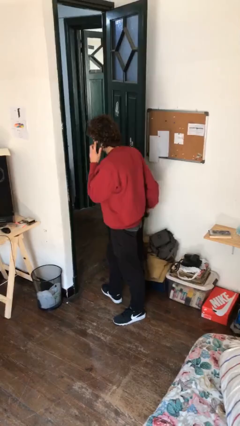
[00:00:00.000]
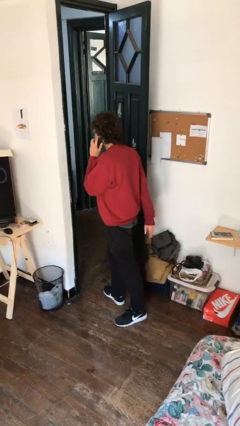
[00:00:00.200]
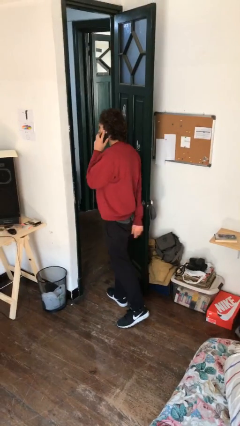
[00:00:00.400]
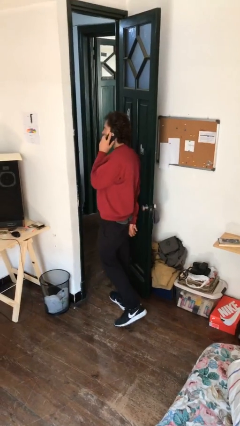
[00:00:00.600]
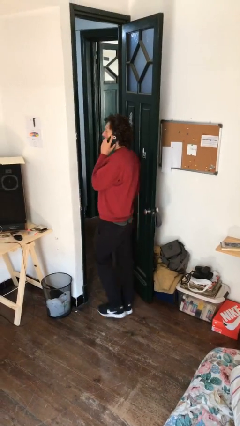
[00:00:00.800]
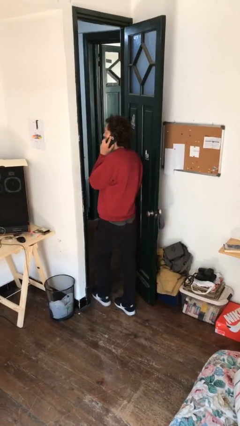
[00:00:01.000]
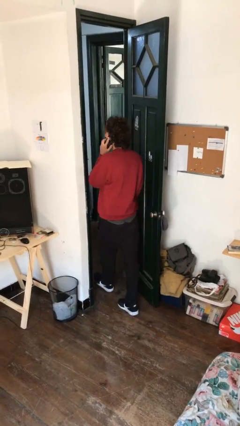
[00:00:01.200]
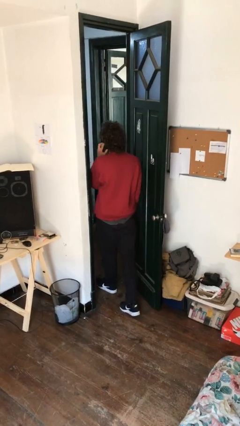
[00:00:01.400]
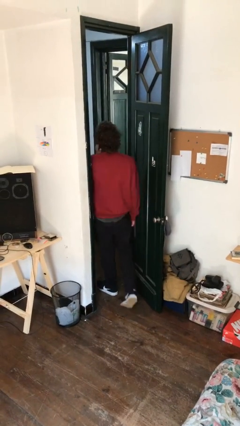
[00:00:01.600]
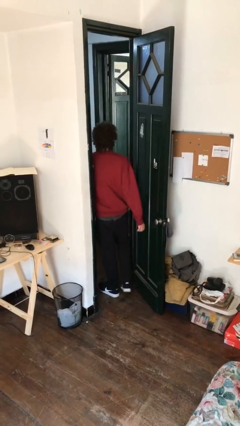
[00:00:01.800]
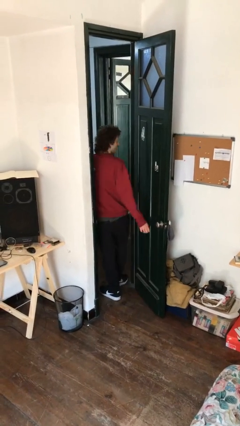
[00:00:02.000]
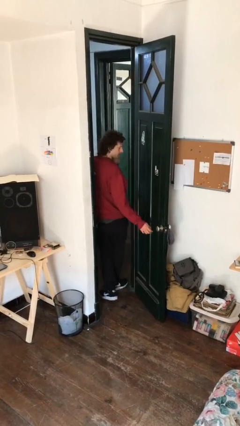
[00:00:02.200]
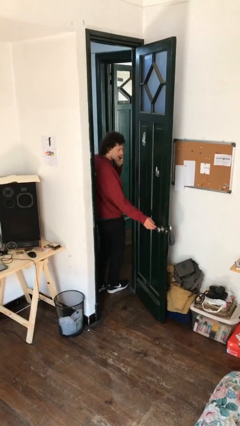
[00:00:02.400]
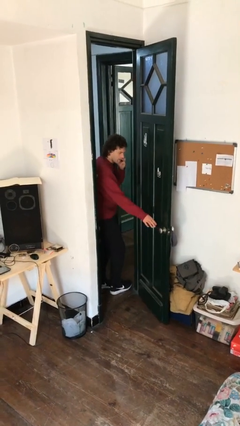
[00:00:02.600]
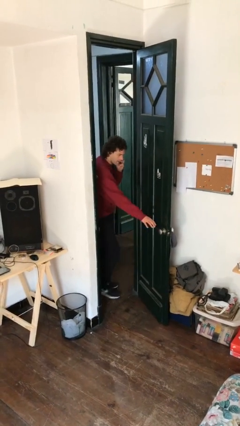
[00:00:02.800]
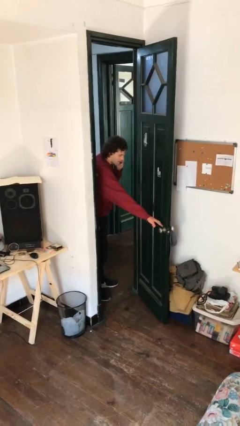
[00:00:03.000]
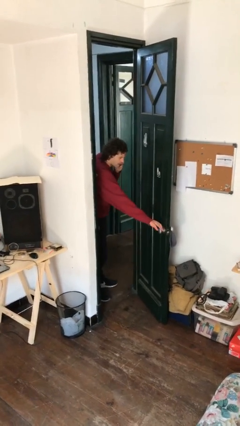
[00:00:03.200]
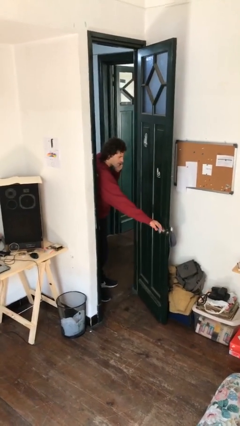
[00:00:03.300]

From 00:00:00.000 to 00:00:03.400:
person exits scene through structure

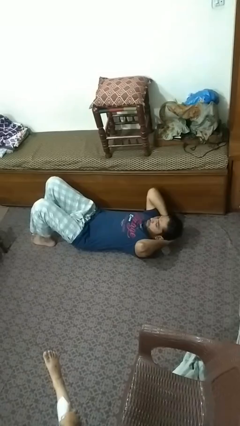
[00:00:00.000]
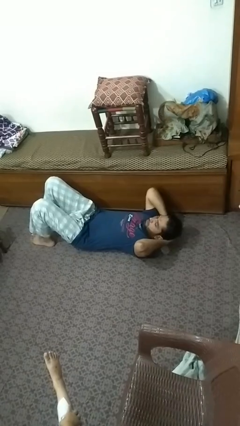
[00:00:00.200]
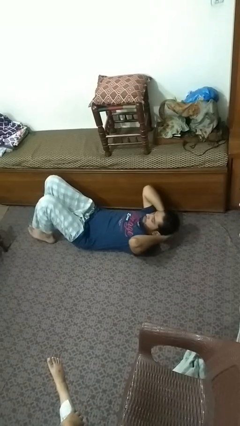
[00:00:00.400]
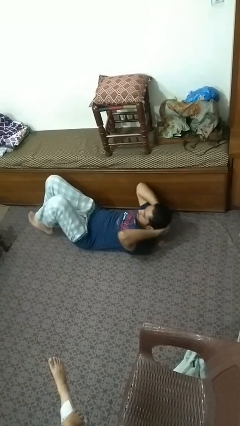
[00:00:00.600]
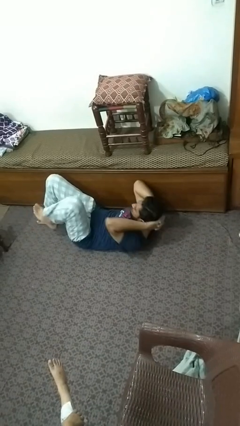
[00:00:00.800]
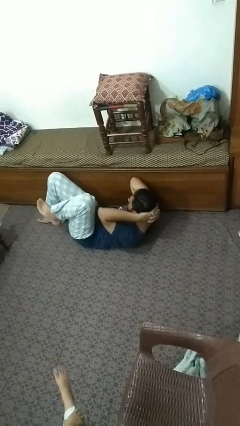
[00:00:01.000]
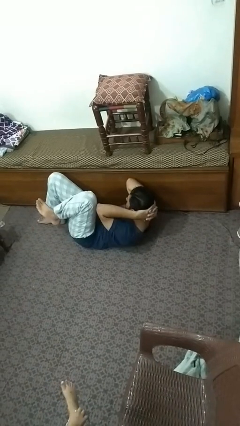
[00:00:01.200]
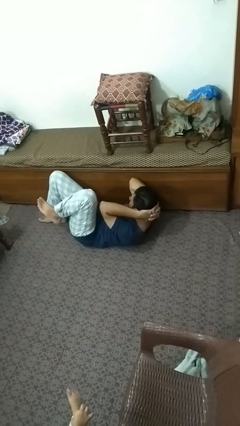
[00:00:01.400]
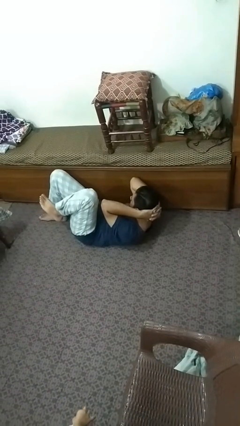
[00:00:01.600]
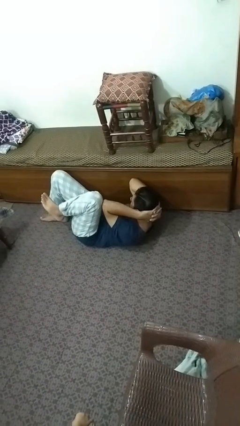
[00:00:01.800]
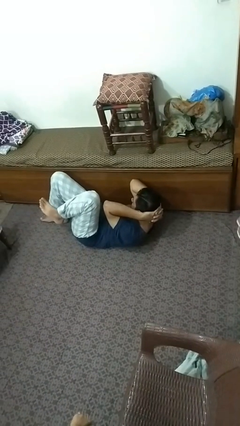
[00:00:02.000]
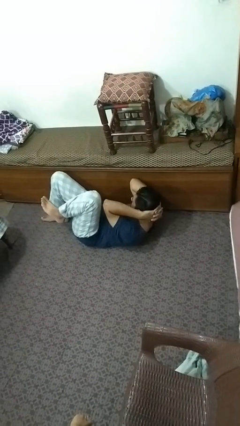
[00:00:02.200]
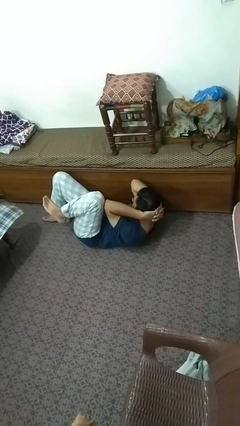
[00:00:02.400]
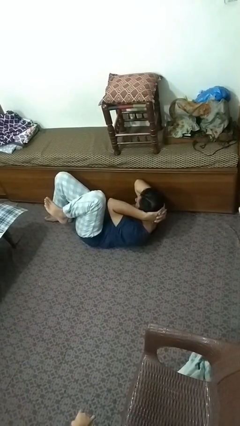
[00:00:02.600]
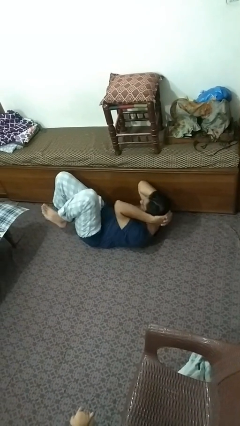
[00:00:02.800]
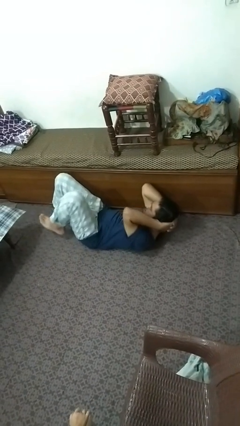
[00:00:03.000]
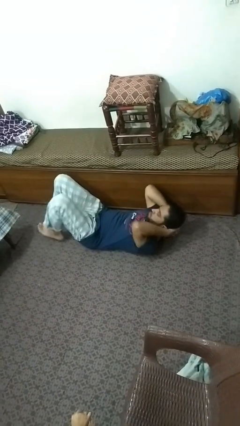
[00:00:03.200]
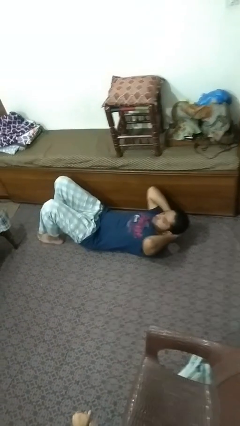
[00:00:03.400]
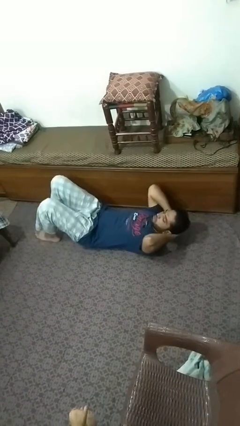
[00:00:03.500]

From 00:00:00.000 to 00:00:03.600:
person exercises with situp

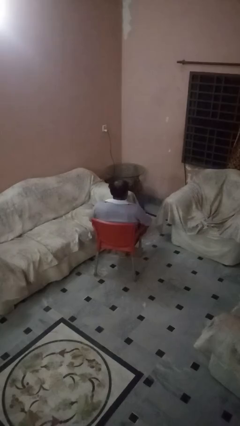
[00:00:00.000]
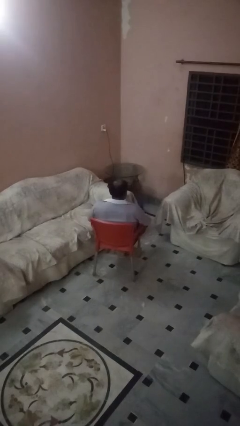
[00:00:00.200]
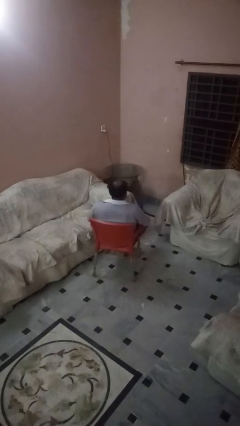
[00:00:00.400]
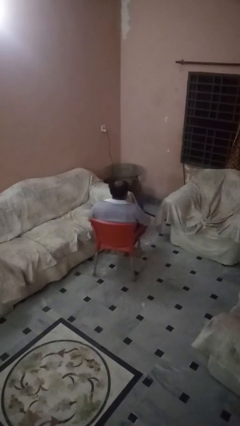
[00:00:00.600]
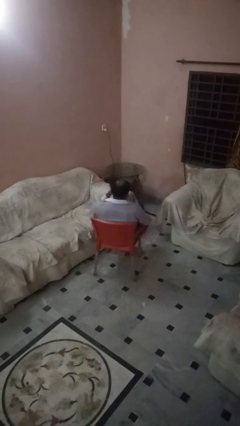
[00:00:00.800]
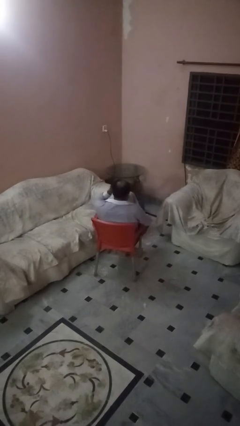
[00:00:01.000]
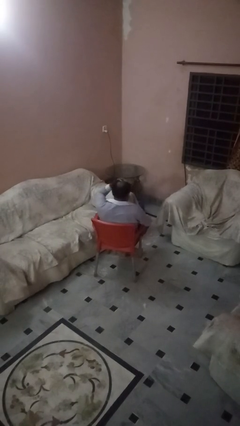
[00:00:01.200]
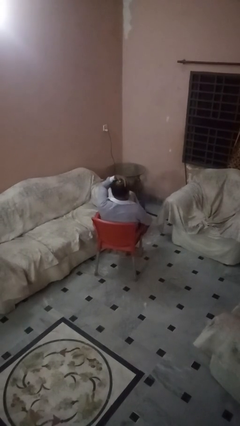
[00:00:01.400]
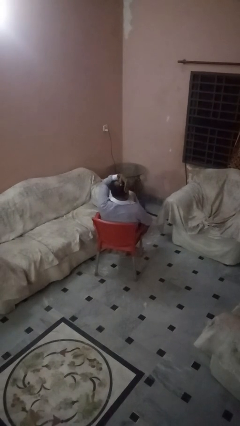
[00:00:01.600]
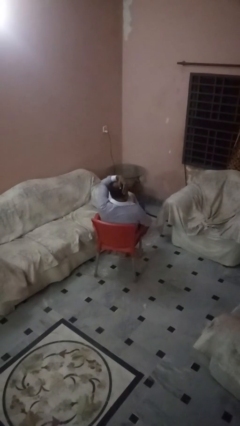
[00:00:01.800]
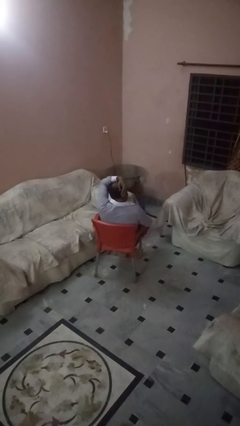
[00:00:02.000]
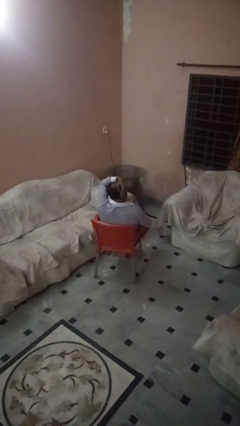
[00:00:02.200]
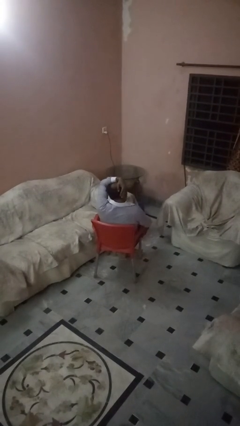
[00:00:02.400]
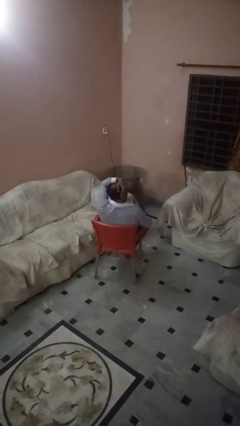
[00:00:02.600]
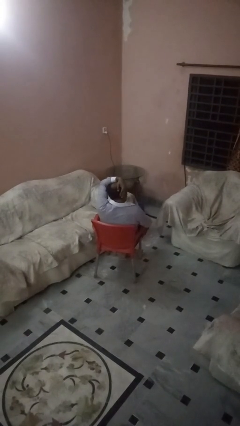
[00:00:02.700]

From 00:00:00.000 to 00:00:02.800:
person strokes hair

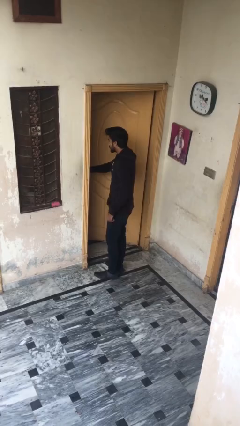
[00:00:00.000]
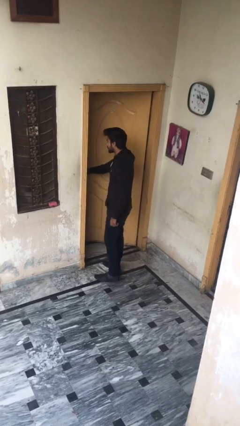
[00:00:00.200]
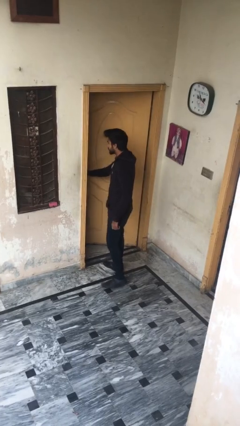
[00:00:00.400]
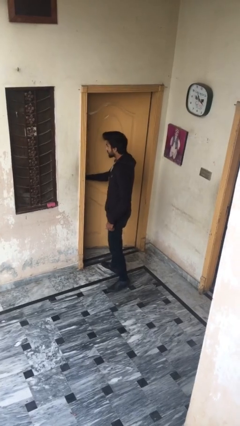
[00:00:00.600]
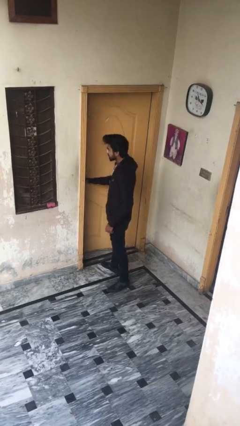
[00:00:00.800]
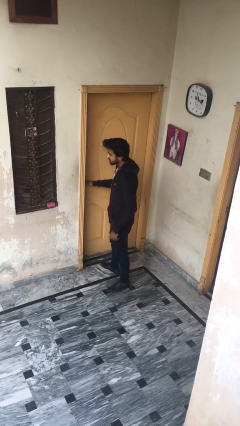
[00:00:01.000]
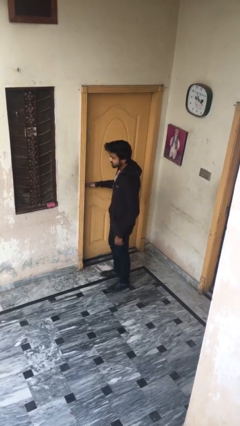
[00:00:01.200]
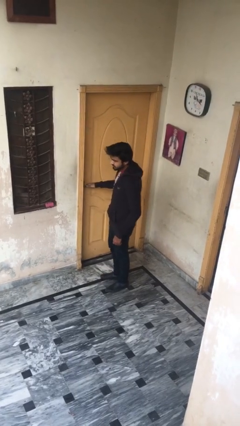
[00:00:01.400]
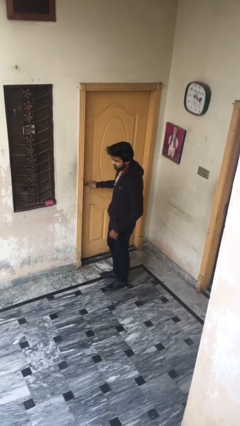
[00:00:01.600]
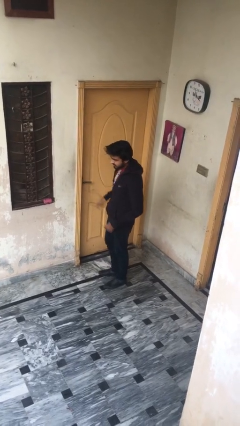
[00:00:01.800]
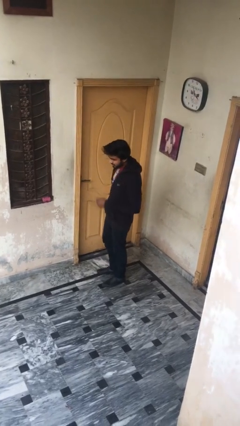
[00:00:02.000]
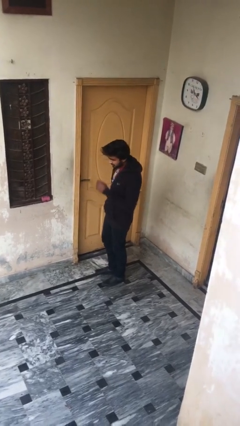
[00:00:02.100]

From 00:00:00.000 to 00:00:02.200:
person closes facility door

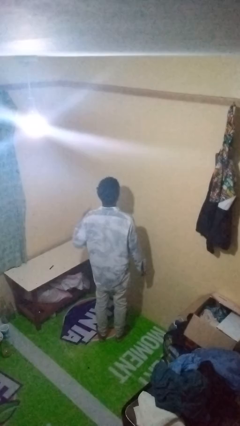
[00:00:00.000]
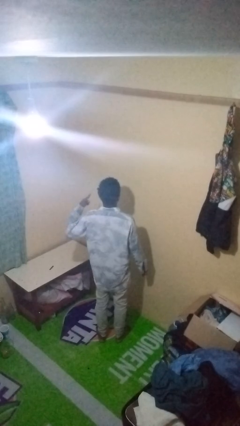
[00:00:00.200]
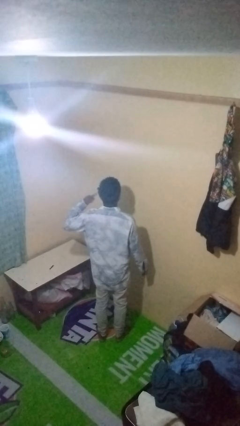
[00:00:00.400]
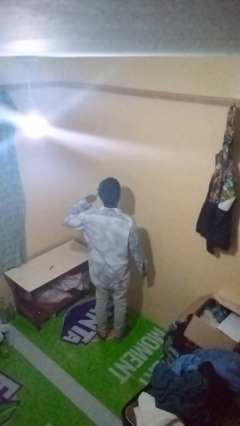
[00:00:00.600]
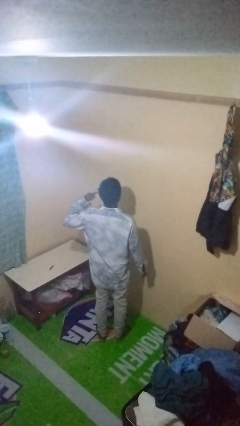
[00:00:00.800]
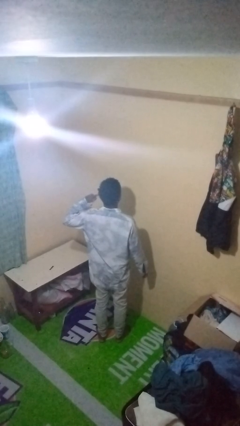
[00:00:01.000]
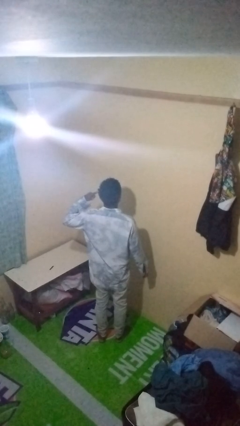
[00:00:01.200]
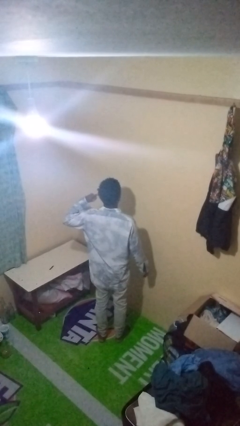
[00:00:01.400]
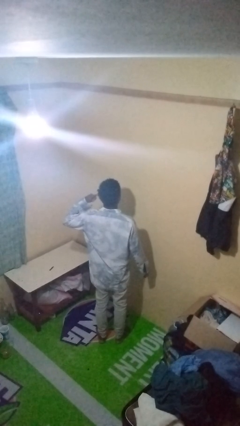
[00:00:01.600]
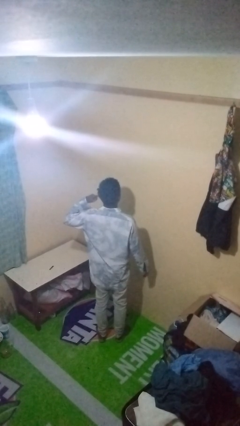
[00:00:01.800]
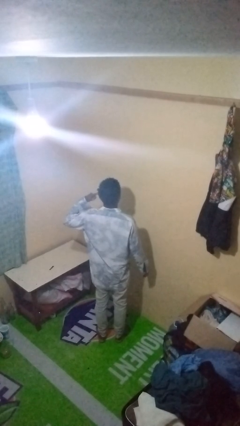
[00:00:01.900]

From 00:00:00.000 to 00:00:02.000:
person gestures listen closely

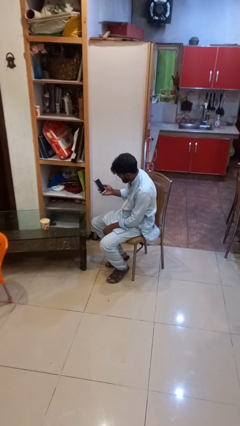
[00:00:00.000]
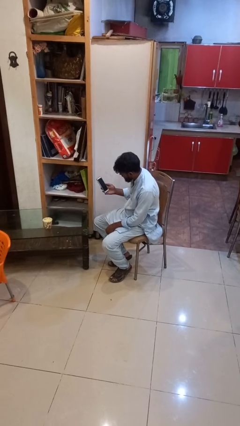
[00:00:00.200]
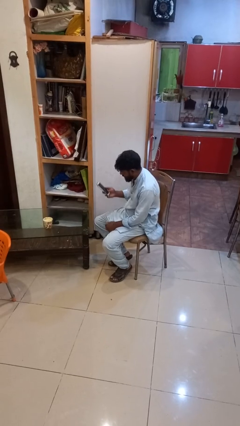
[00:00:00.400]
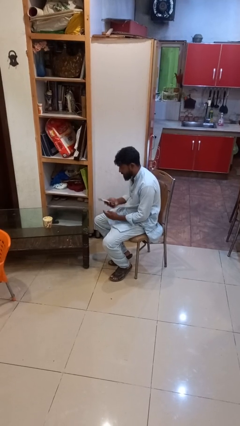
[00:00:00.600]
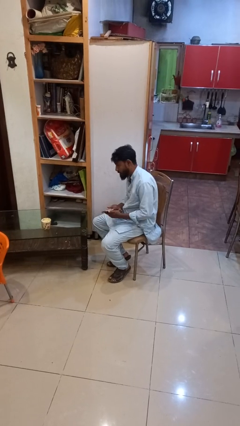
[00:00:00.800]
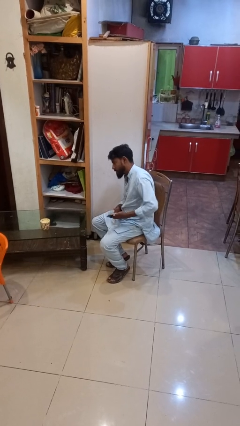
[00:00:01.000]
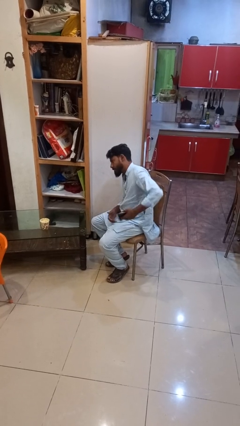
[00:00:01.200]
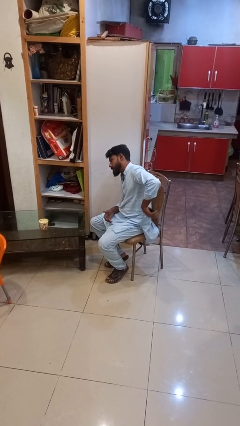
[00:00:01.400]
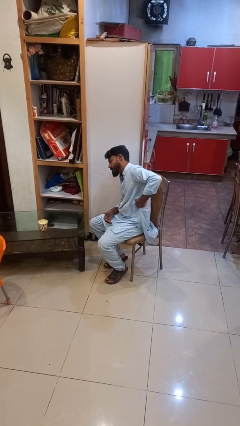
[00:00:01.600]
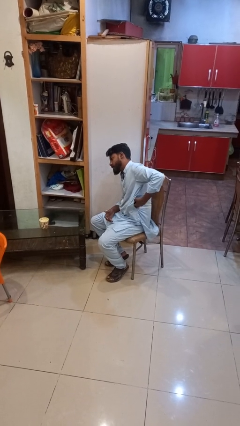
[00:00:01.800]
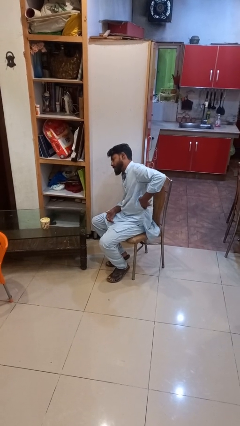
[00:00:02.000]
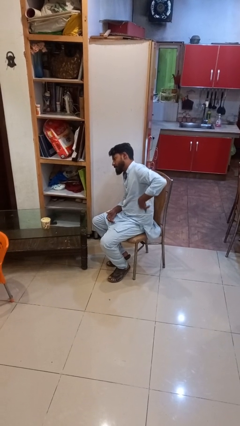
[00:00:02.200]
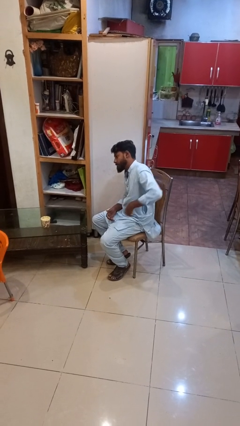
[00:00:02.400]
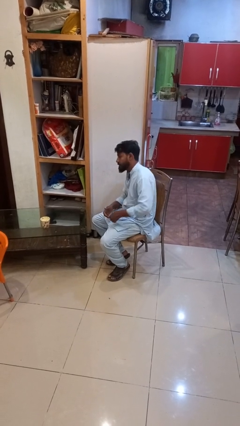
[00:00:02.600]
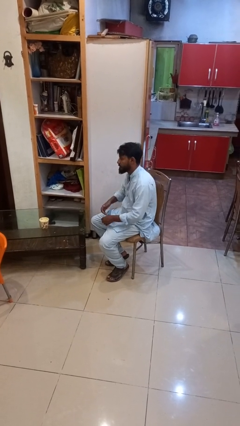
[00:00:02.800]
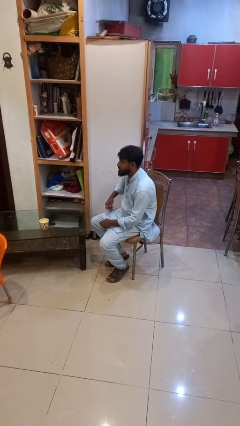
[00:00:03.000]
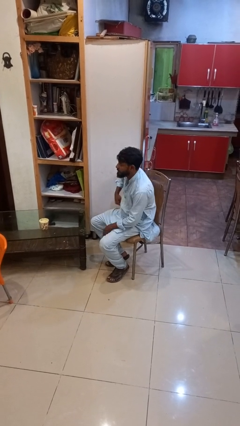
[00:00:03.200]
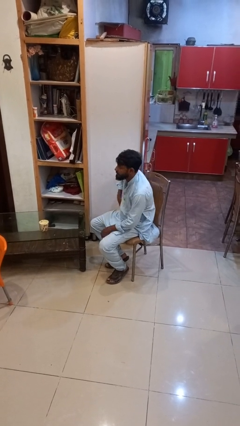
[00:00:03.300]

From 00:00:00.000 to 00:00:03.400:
person puts phone into pocket
